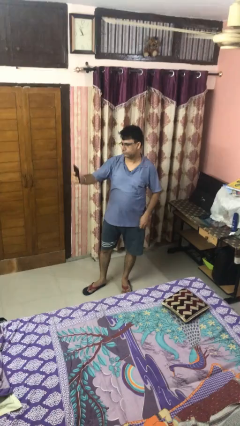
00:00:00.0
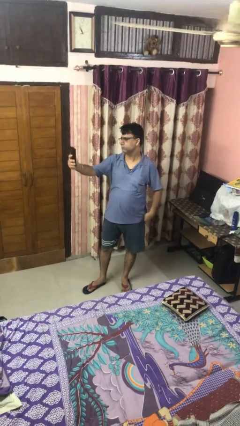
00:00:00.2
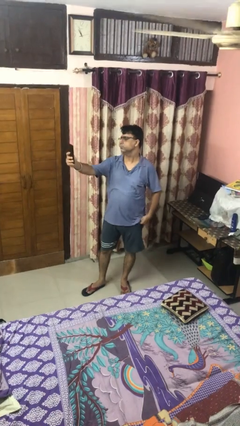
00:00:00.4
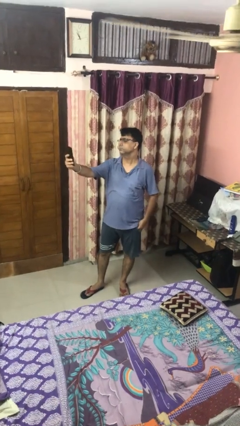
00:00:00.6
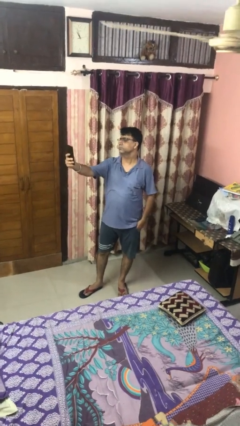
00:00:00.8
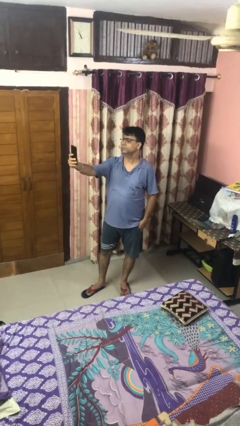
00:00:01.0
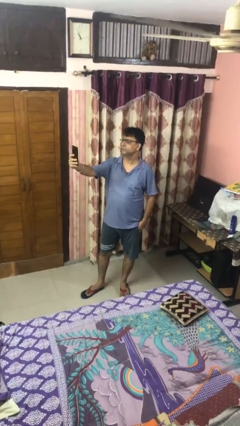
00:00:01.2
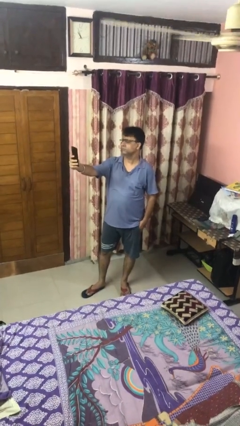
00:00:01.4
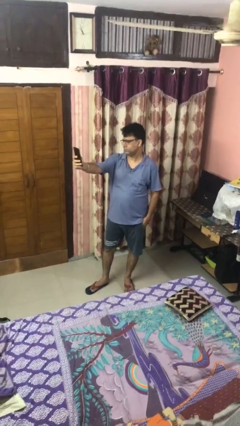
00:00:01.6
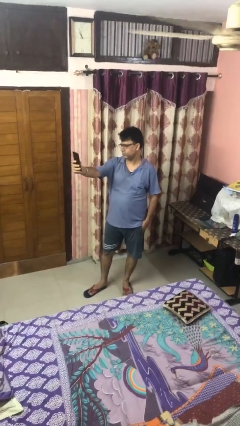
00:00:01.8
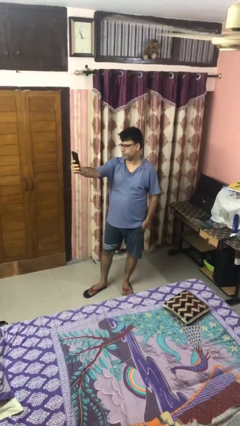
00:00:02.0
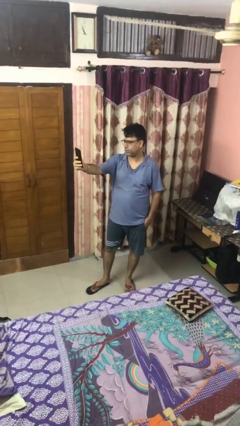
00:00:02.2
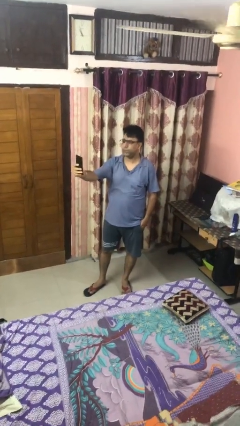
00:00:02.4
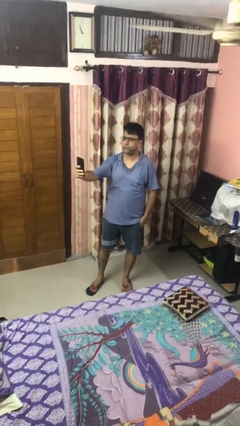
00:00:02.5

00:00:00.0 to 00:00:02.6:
person takes selfie

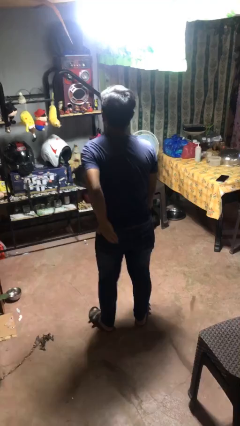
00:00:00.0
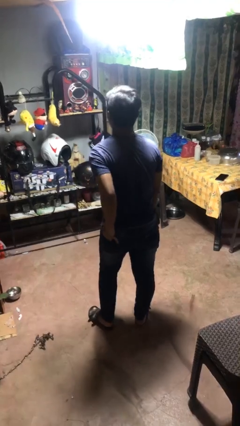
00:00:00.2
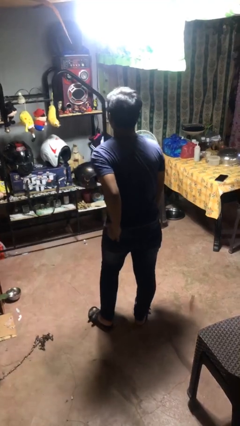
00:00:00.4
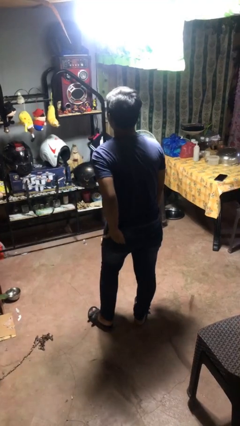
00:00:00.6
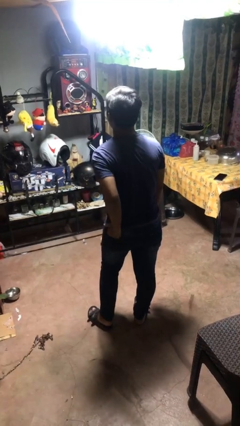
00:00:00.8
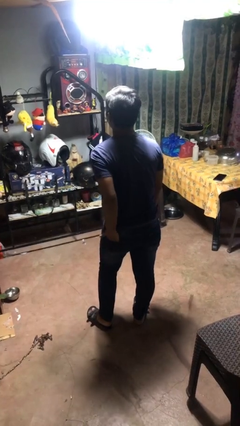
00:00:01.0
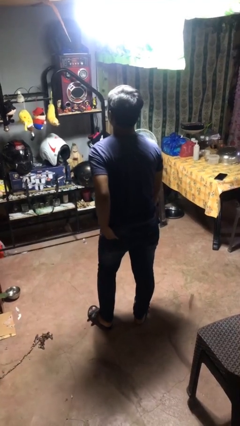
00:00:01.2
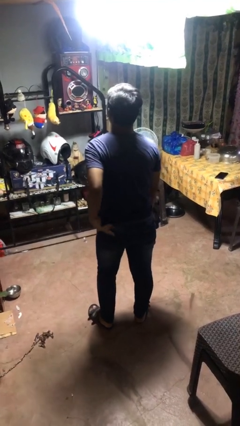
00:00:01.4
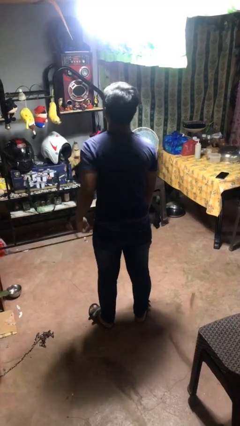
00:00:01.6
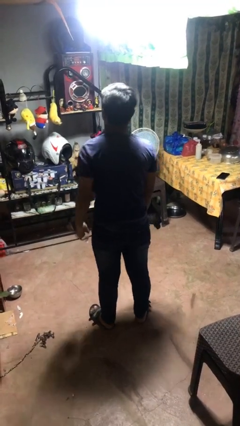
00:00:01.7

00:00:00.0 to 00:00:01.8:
person puts hands in back pockets

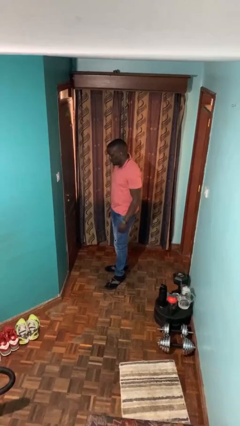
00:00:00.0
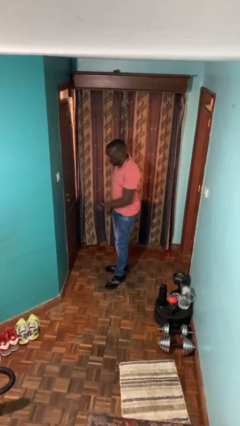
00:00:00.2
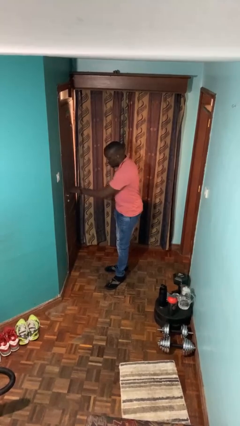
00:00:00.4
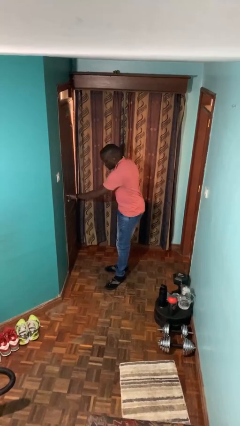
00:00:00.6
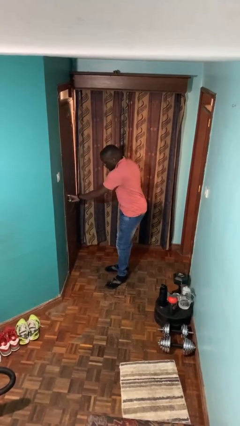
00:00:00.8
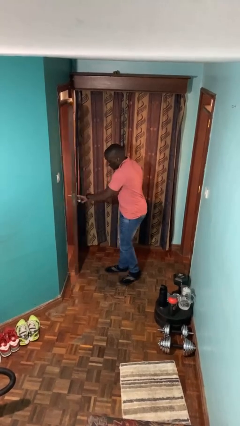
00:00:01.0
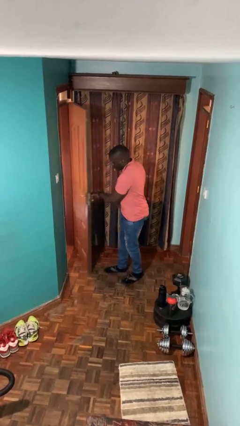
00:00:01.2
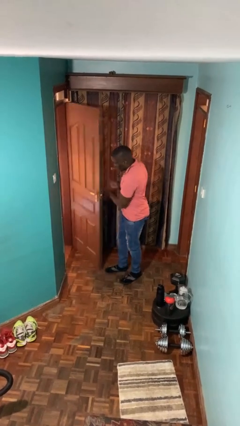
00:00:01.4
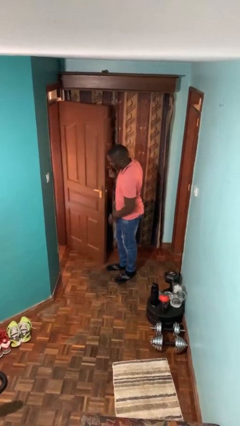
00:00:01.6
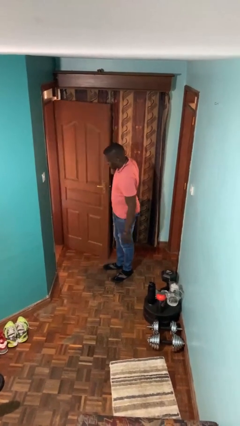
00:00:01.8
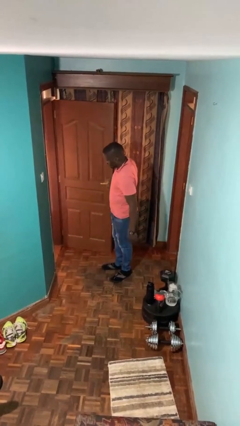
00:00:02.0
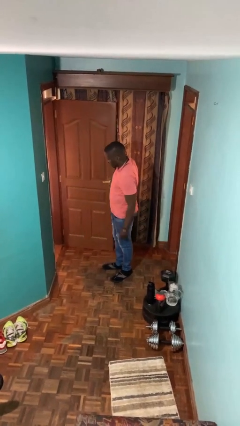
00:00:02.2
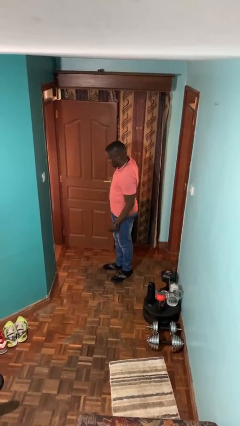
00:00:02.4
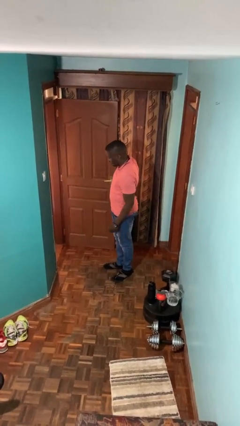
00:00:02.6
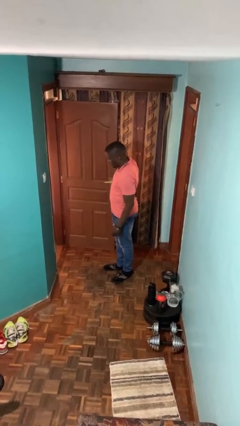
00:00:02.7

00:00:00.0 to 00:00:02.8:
person opens facility door

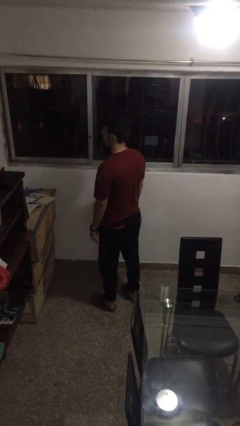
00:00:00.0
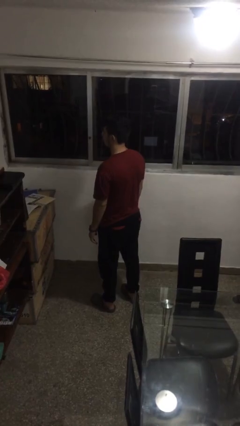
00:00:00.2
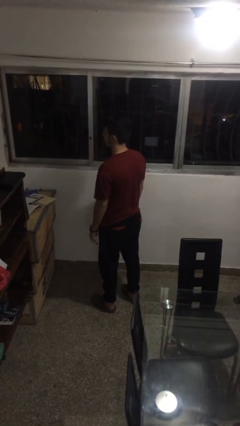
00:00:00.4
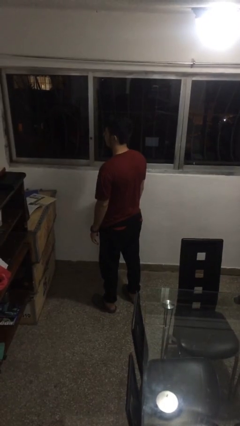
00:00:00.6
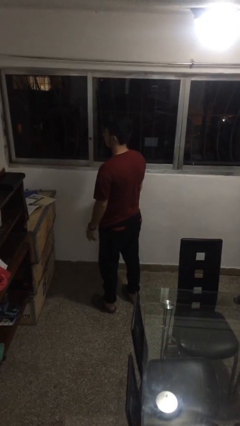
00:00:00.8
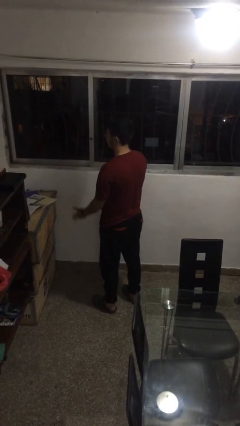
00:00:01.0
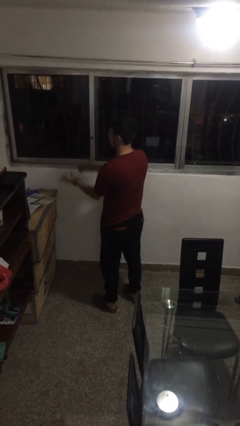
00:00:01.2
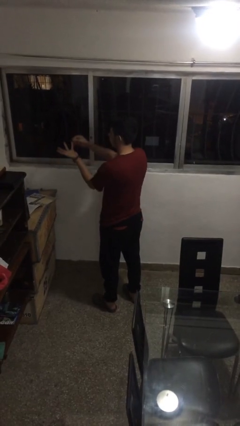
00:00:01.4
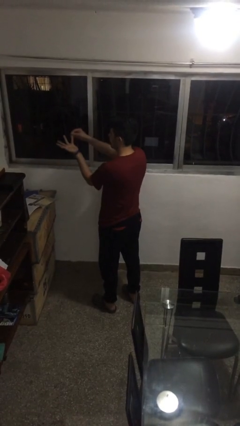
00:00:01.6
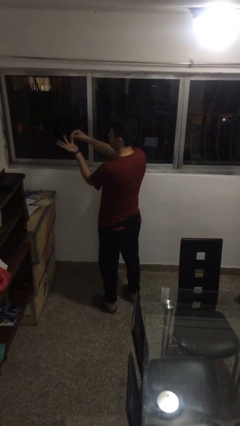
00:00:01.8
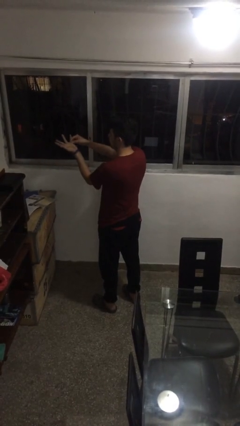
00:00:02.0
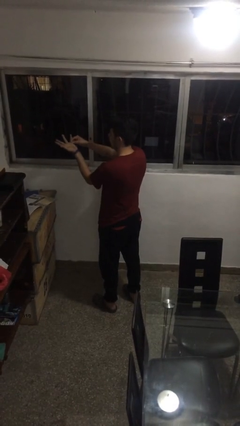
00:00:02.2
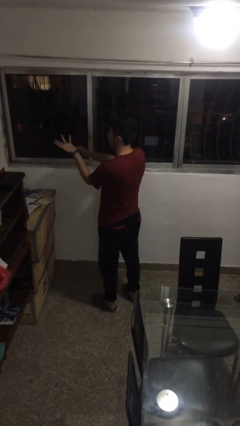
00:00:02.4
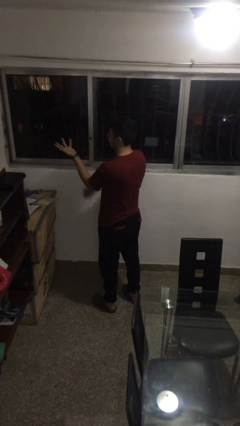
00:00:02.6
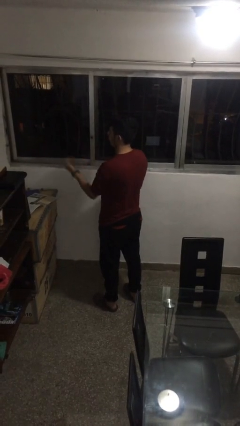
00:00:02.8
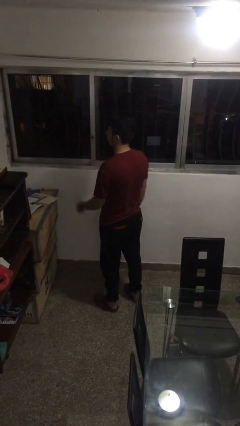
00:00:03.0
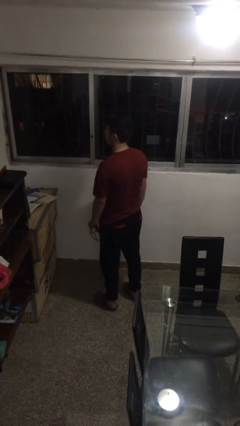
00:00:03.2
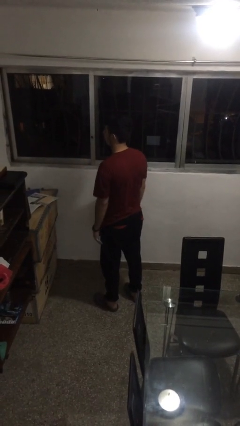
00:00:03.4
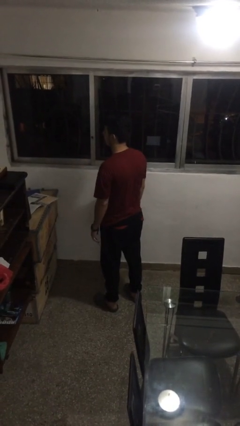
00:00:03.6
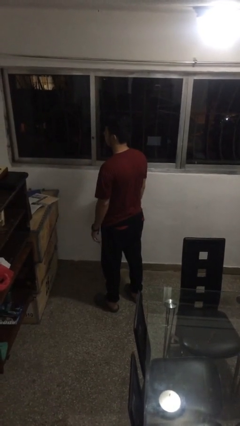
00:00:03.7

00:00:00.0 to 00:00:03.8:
person puts on ring

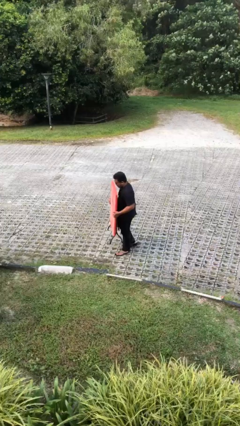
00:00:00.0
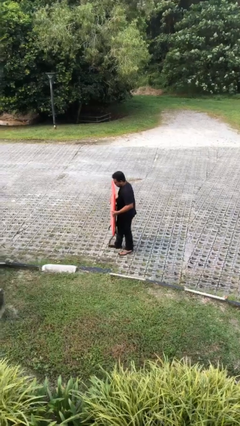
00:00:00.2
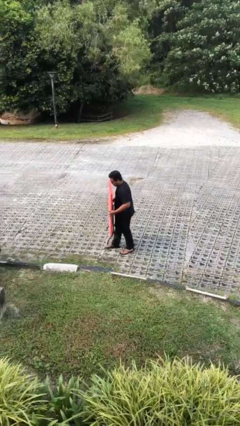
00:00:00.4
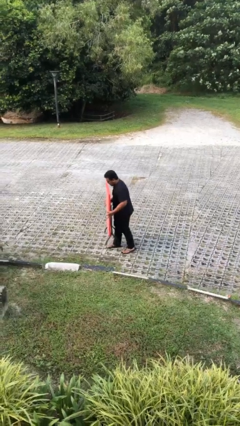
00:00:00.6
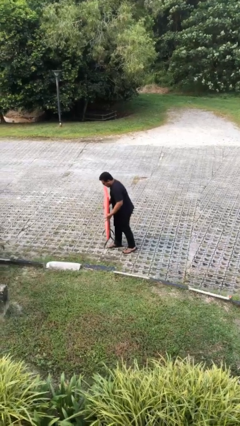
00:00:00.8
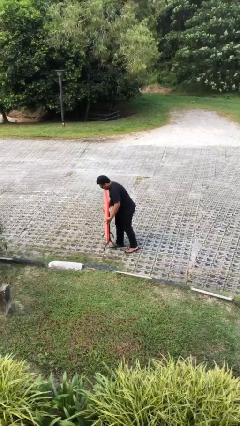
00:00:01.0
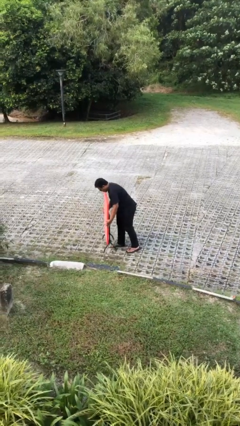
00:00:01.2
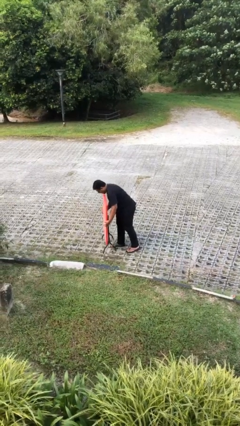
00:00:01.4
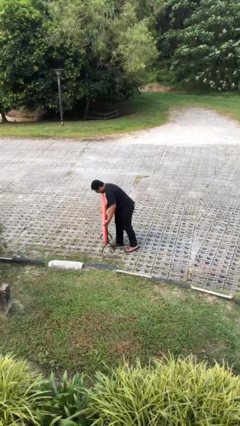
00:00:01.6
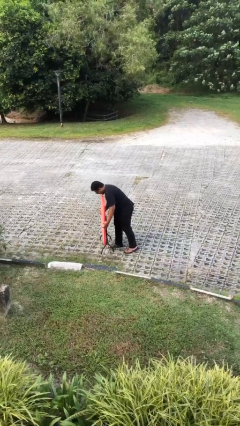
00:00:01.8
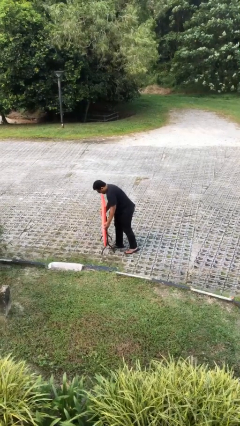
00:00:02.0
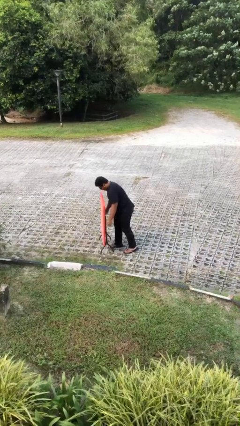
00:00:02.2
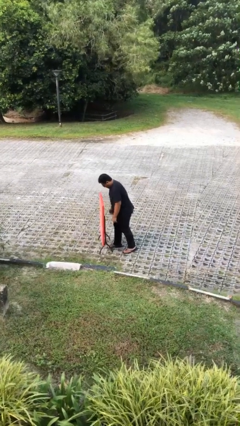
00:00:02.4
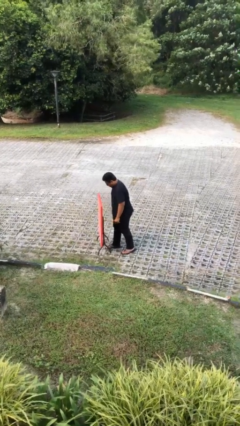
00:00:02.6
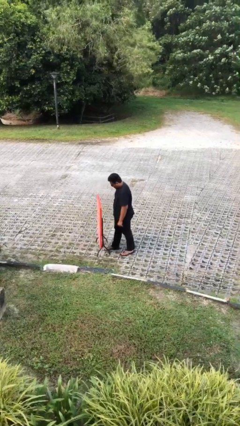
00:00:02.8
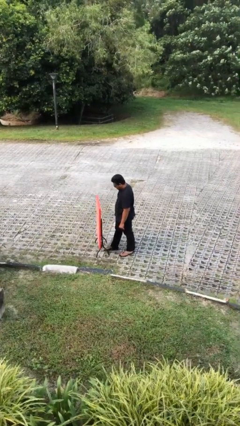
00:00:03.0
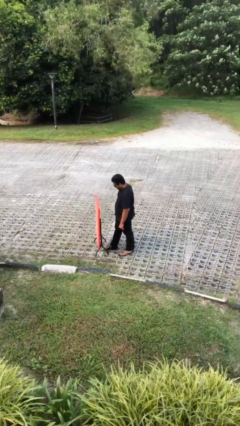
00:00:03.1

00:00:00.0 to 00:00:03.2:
person puts down object on floor

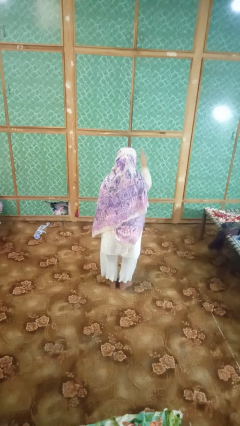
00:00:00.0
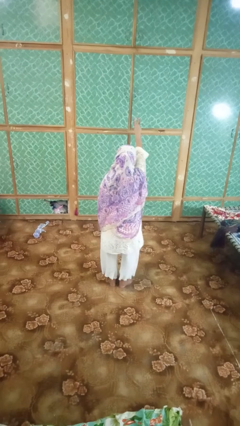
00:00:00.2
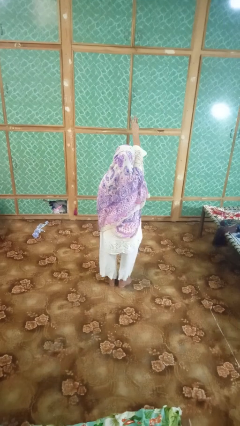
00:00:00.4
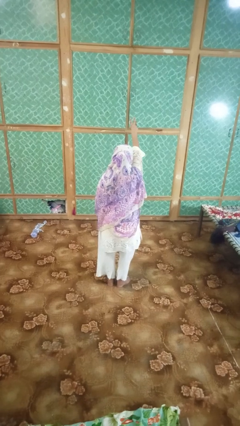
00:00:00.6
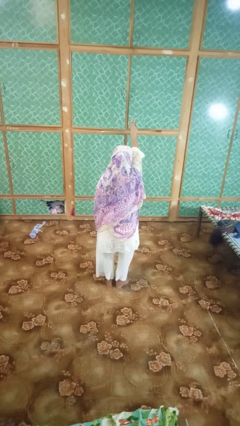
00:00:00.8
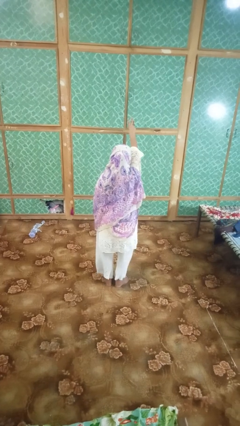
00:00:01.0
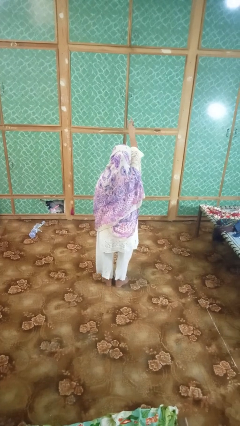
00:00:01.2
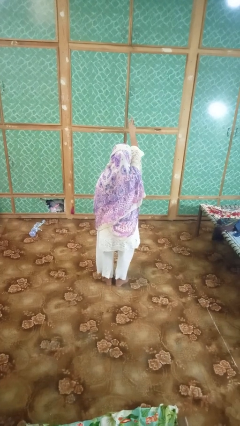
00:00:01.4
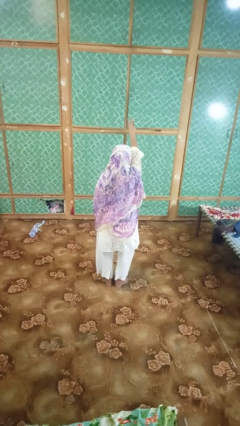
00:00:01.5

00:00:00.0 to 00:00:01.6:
person gestures number three

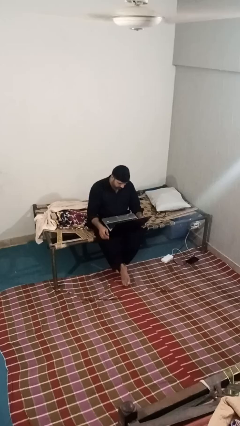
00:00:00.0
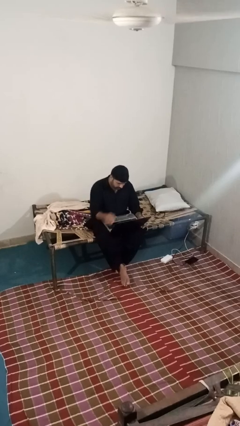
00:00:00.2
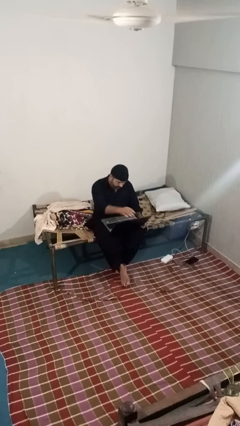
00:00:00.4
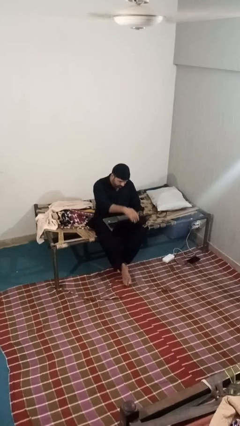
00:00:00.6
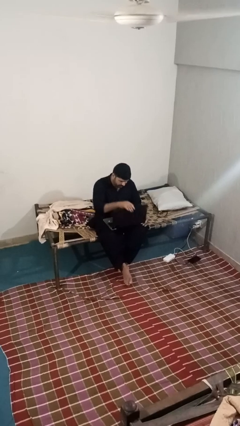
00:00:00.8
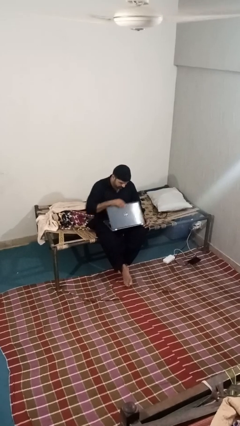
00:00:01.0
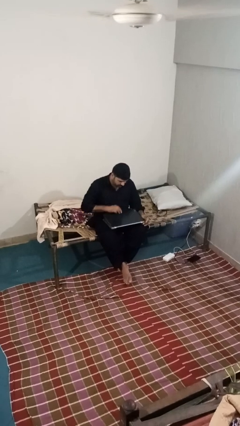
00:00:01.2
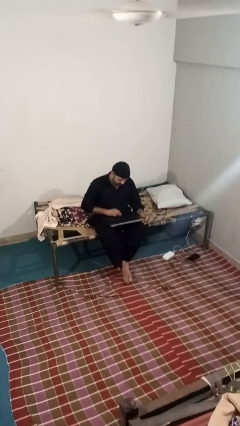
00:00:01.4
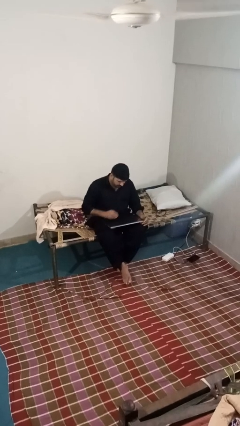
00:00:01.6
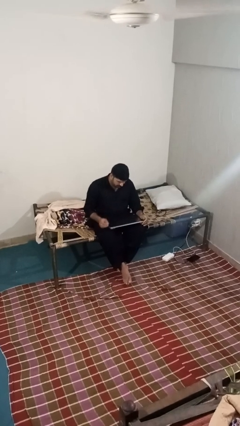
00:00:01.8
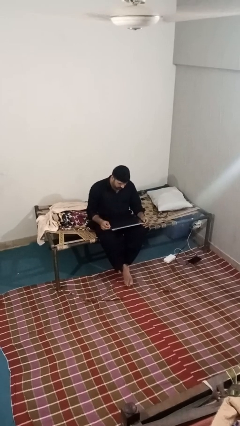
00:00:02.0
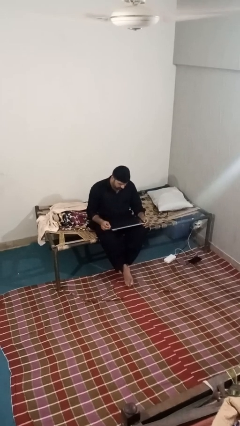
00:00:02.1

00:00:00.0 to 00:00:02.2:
person closes laptop
